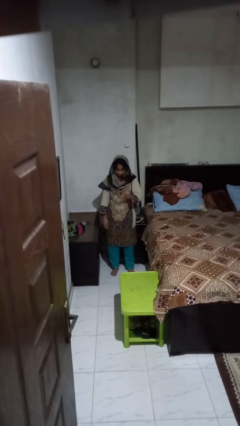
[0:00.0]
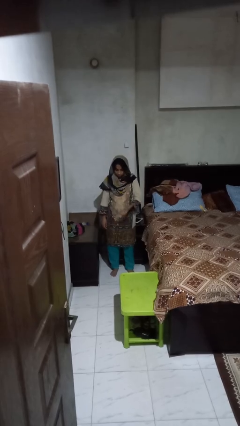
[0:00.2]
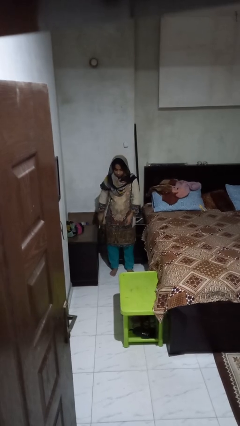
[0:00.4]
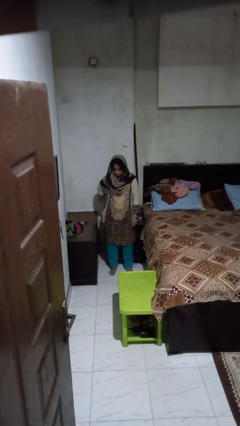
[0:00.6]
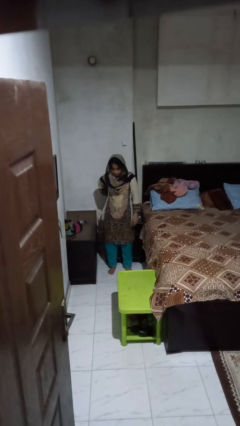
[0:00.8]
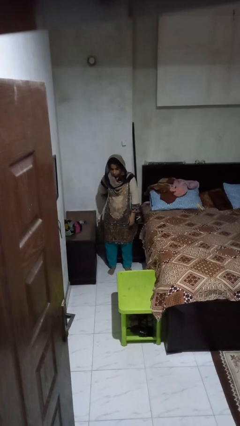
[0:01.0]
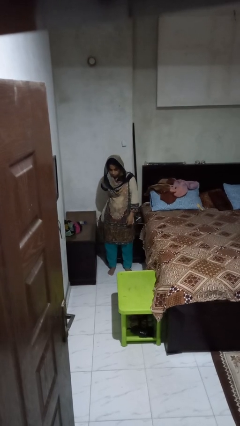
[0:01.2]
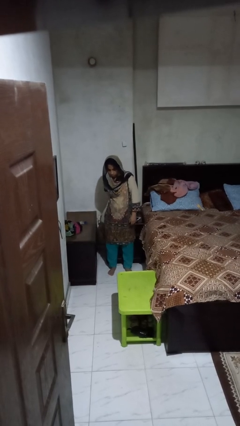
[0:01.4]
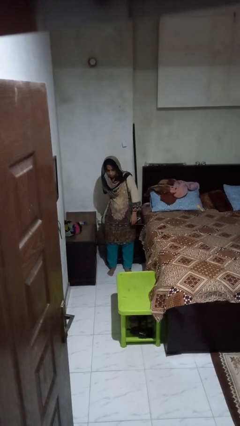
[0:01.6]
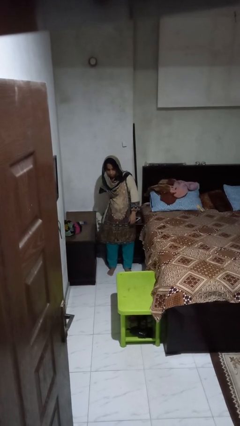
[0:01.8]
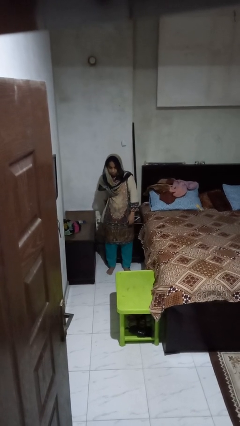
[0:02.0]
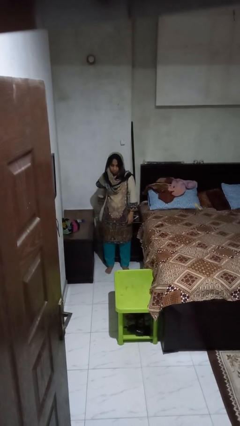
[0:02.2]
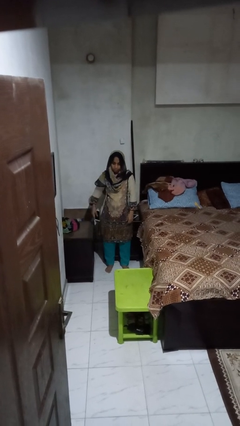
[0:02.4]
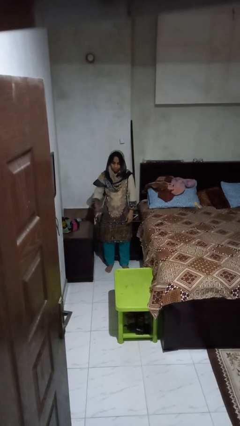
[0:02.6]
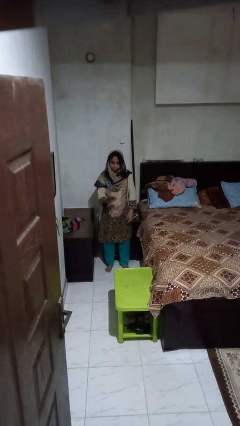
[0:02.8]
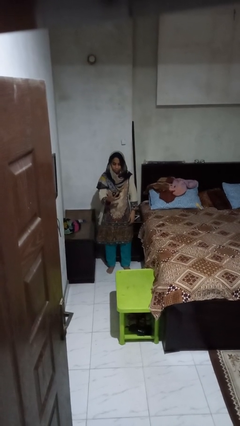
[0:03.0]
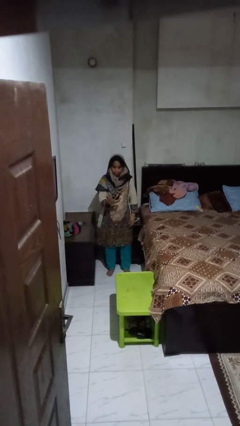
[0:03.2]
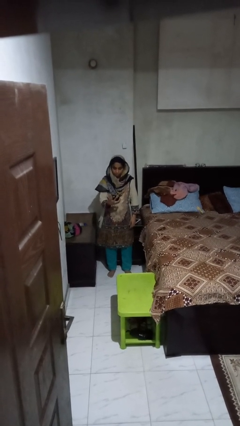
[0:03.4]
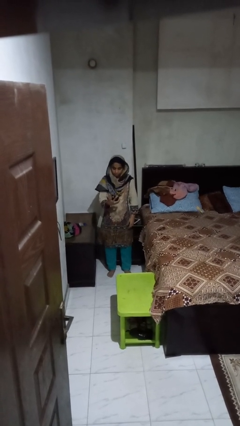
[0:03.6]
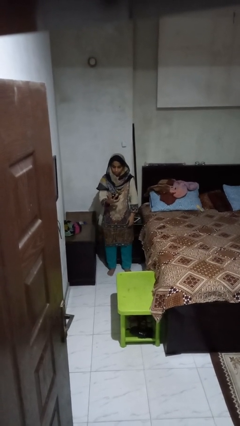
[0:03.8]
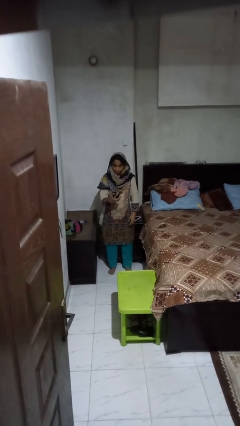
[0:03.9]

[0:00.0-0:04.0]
person takes phone from pocket

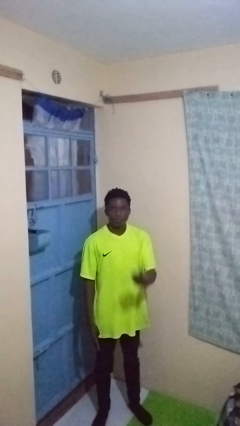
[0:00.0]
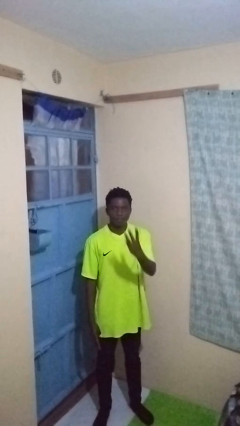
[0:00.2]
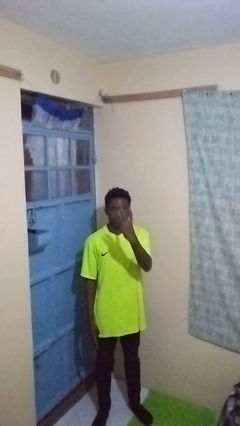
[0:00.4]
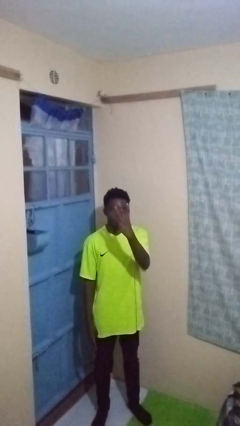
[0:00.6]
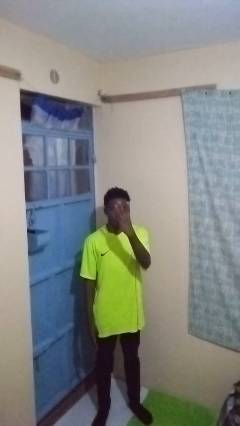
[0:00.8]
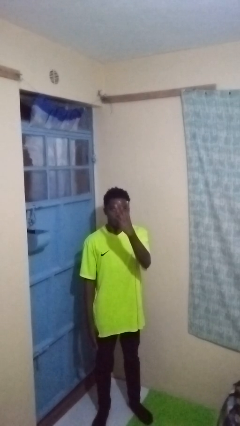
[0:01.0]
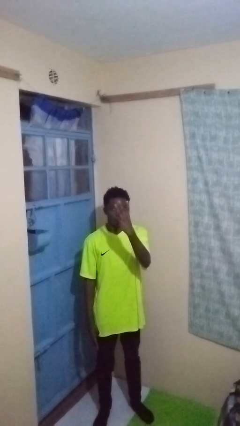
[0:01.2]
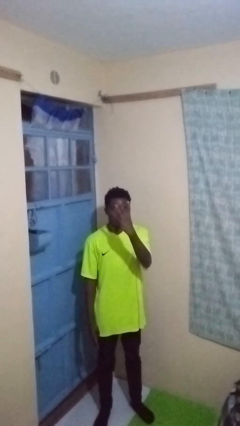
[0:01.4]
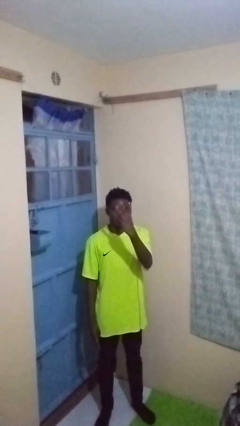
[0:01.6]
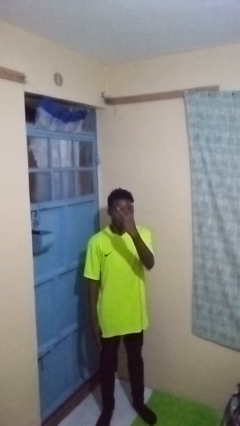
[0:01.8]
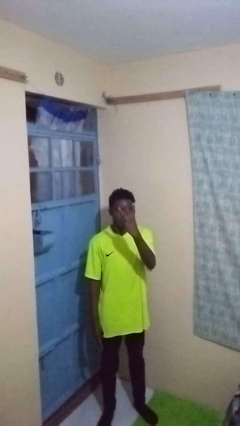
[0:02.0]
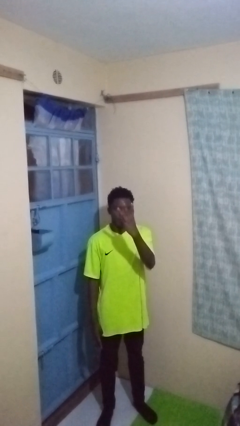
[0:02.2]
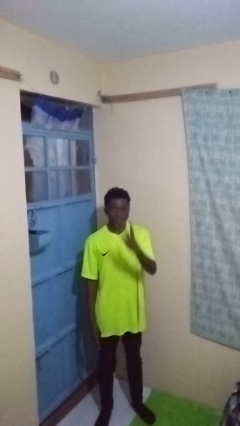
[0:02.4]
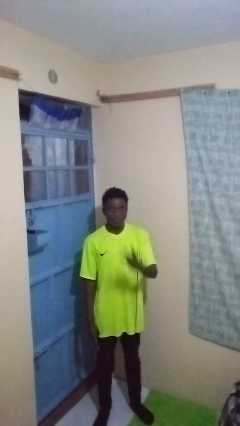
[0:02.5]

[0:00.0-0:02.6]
person gestures number three

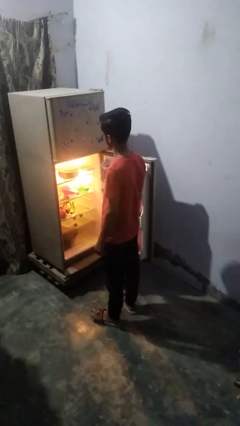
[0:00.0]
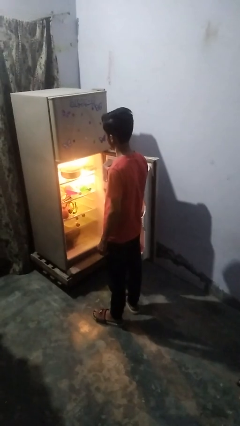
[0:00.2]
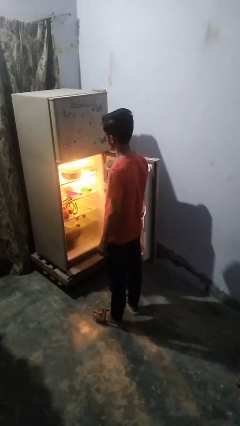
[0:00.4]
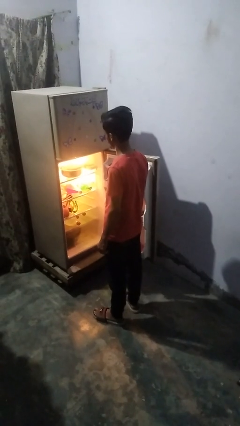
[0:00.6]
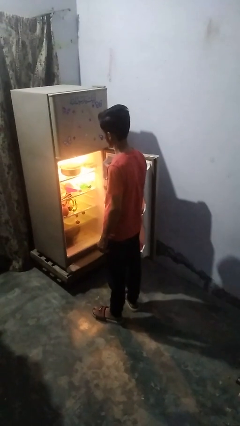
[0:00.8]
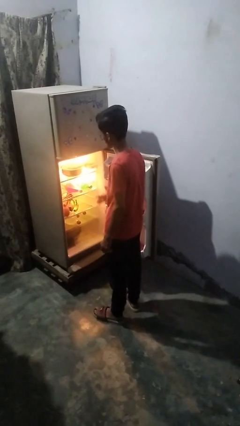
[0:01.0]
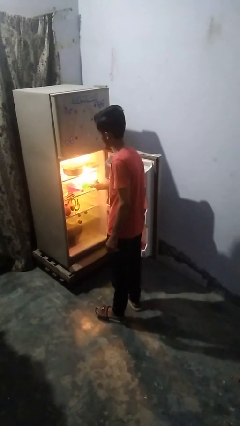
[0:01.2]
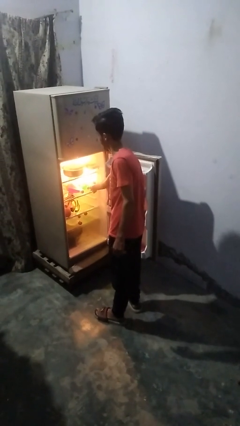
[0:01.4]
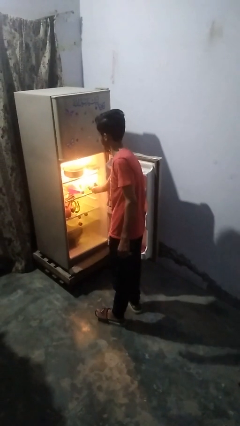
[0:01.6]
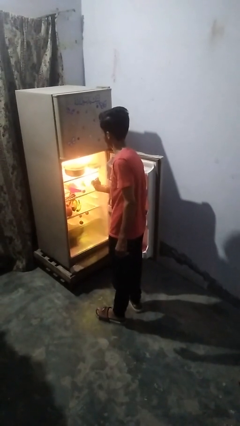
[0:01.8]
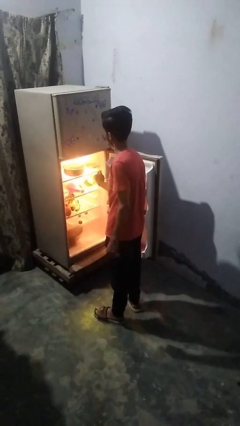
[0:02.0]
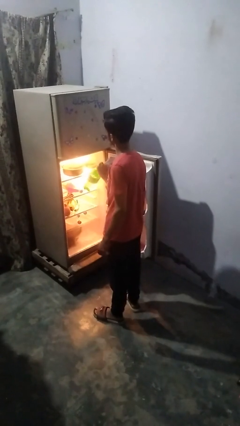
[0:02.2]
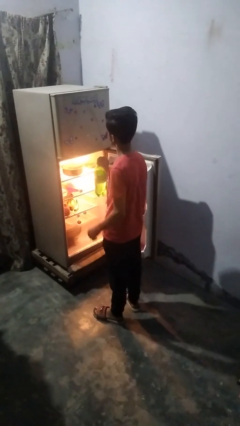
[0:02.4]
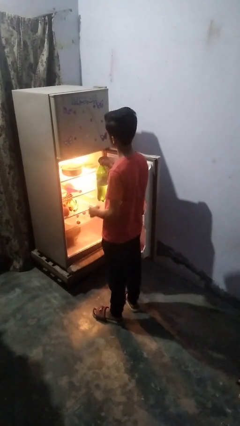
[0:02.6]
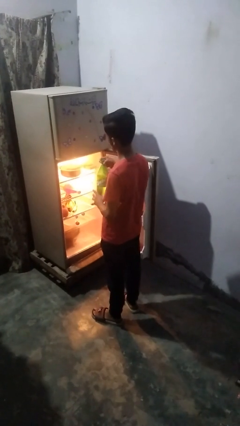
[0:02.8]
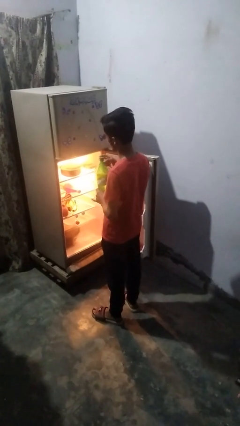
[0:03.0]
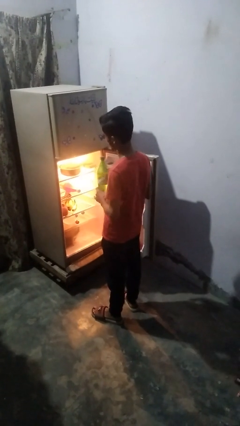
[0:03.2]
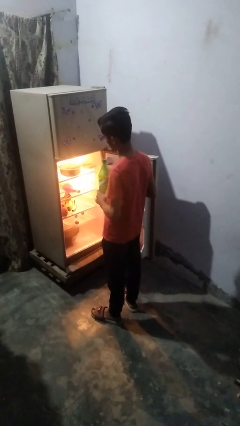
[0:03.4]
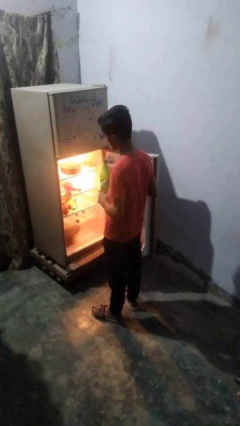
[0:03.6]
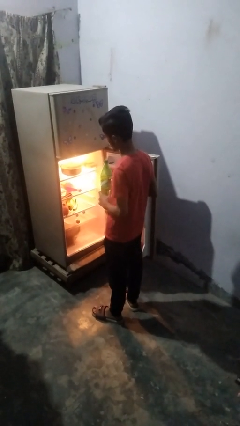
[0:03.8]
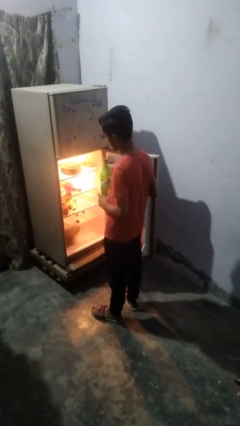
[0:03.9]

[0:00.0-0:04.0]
person puts object into refrigerator

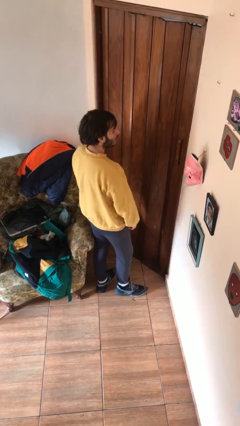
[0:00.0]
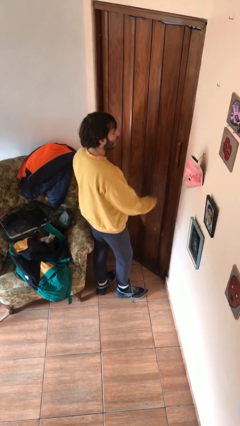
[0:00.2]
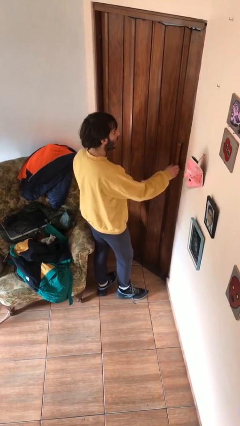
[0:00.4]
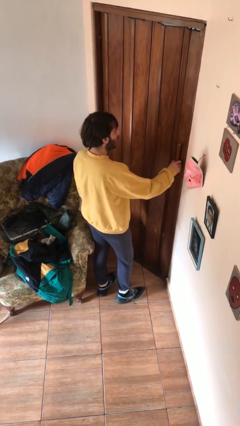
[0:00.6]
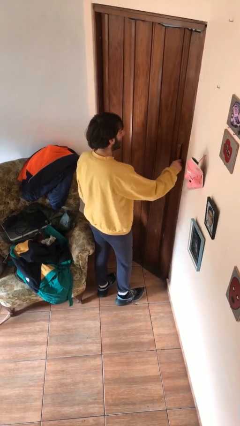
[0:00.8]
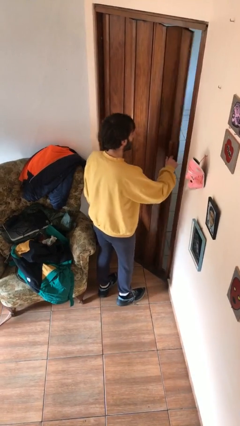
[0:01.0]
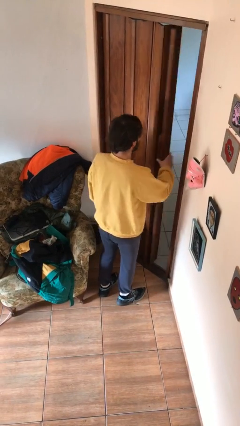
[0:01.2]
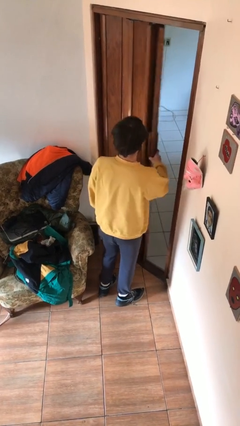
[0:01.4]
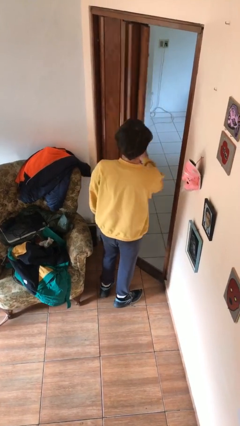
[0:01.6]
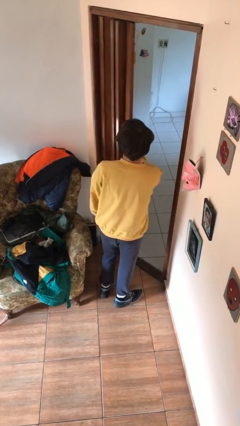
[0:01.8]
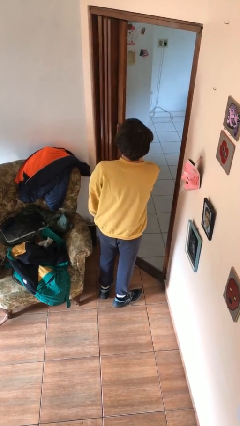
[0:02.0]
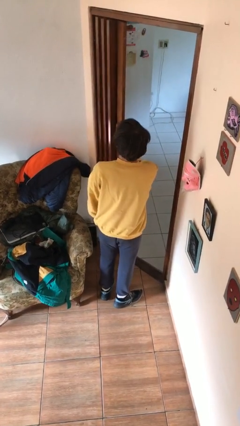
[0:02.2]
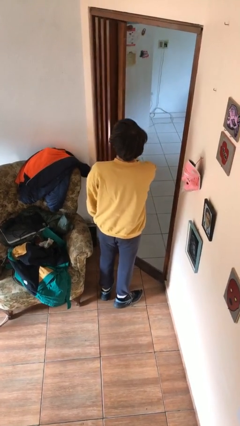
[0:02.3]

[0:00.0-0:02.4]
person opens sliding door

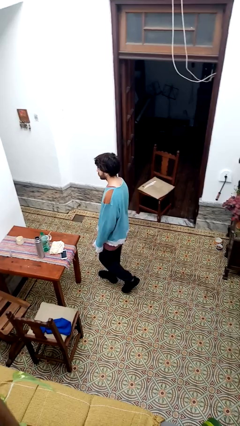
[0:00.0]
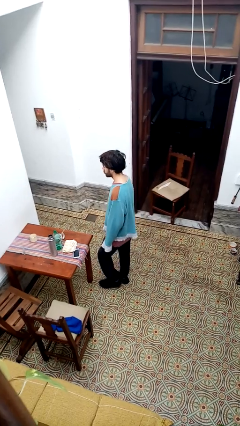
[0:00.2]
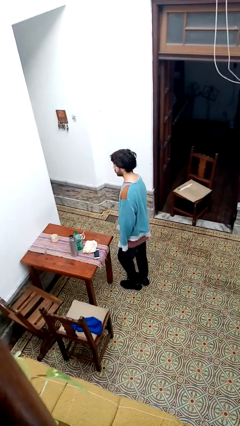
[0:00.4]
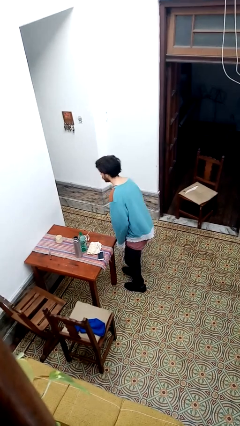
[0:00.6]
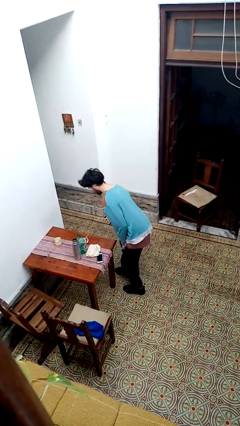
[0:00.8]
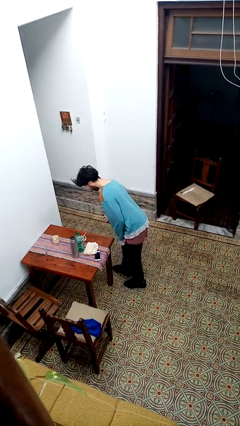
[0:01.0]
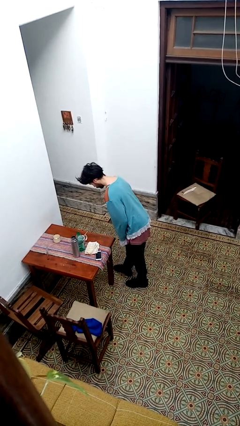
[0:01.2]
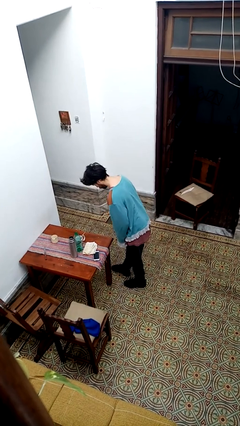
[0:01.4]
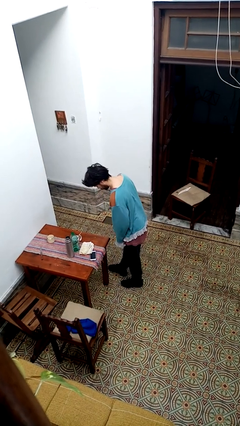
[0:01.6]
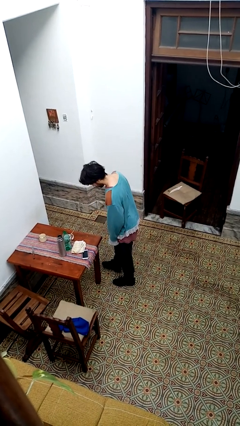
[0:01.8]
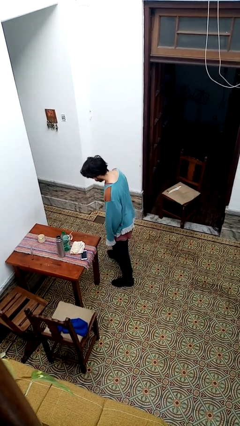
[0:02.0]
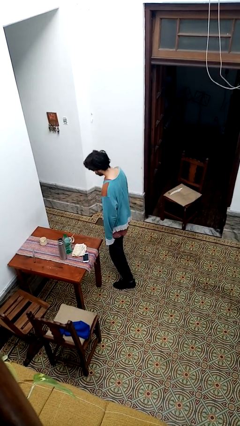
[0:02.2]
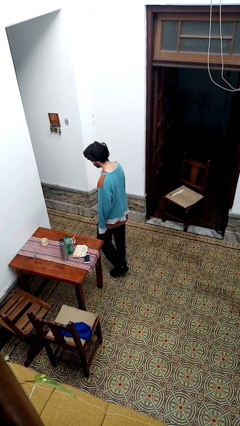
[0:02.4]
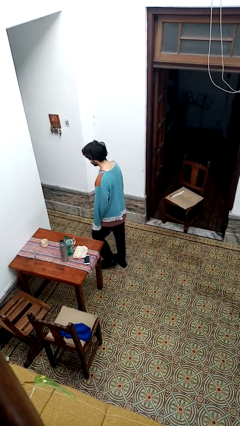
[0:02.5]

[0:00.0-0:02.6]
person bumps into table

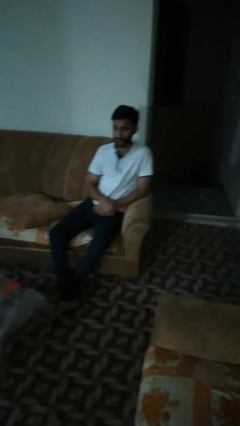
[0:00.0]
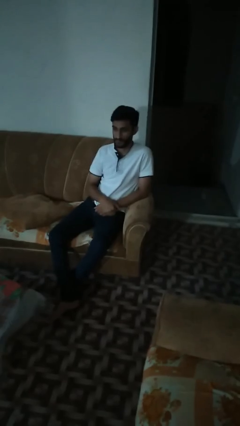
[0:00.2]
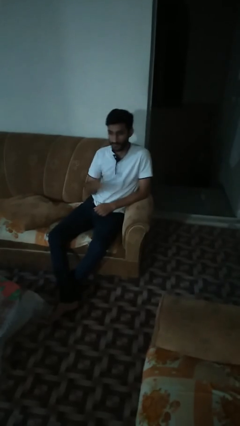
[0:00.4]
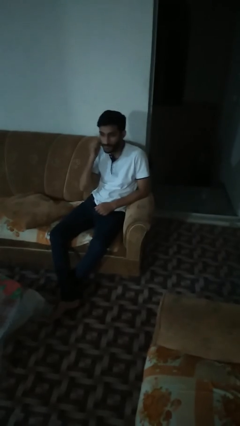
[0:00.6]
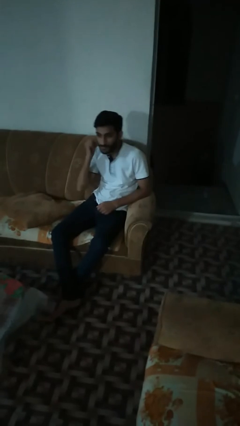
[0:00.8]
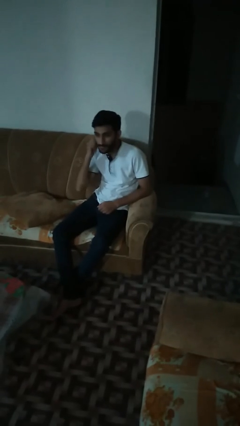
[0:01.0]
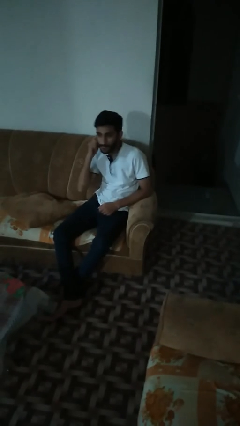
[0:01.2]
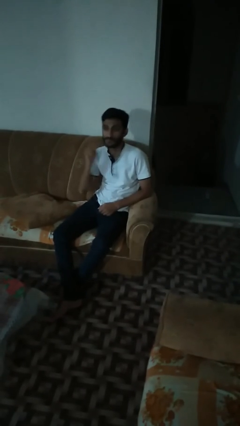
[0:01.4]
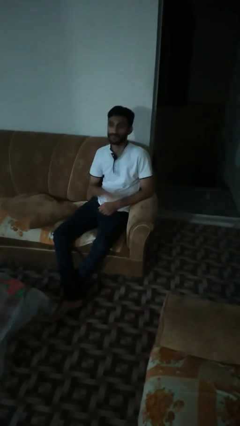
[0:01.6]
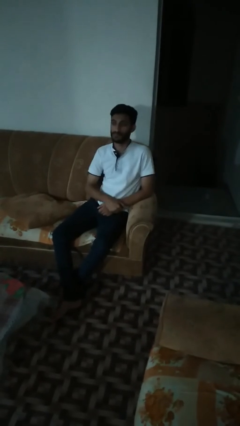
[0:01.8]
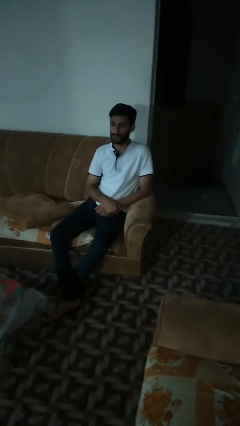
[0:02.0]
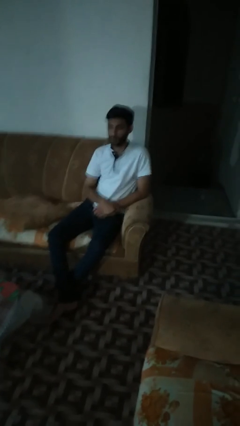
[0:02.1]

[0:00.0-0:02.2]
person gestures listen closely
